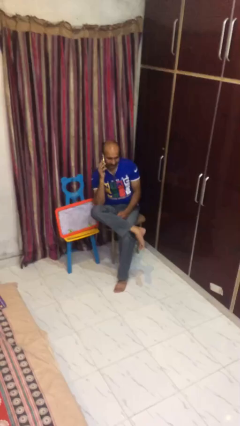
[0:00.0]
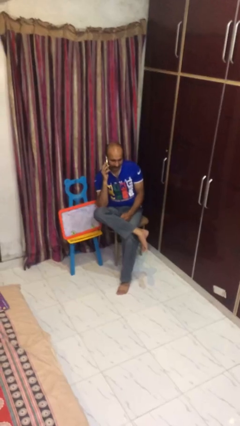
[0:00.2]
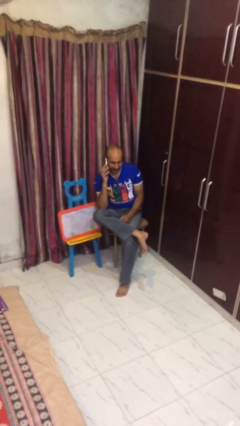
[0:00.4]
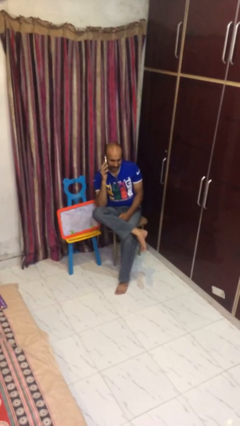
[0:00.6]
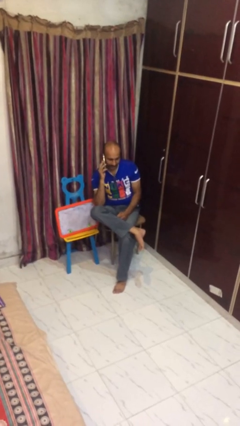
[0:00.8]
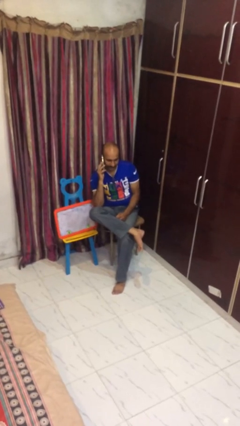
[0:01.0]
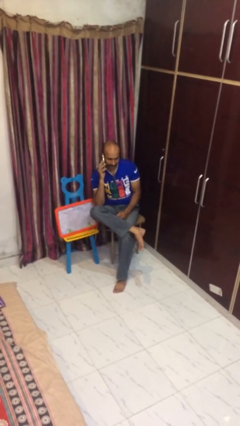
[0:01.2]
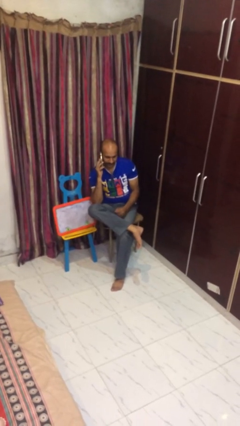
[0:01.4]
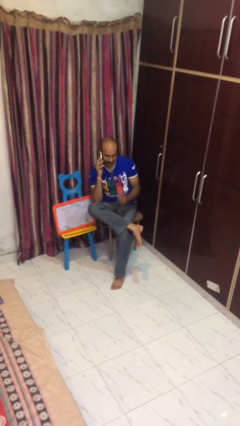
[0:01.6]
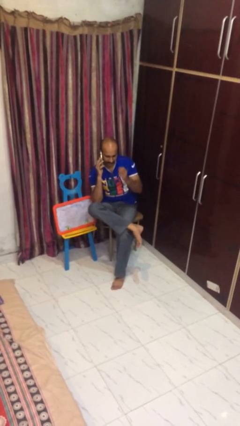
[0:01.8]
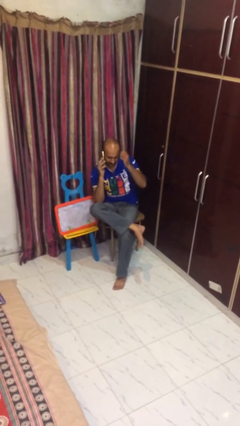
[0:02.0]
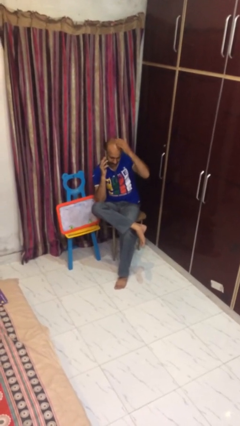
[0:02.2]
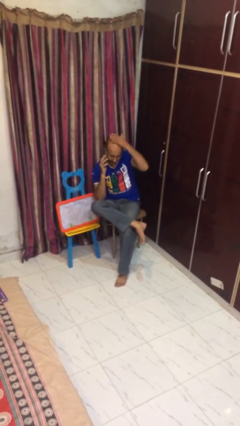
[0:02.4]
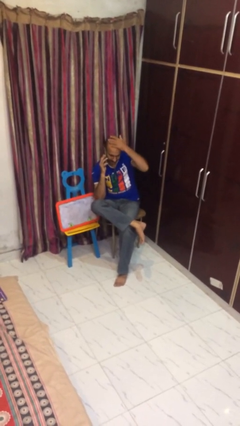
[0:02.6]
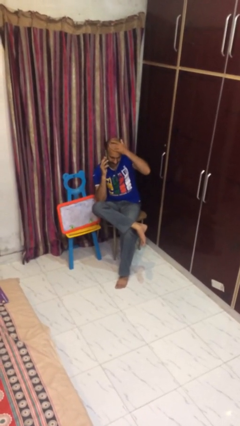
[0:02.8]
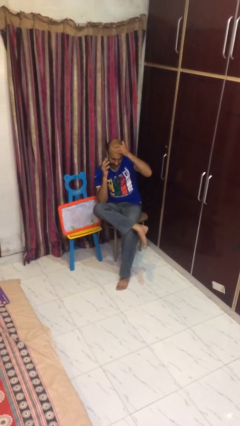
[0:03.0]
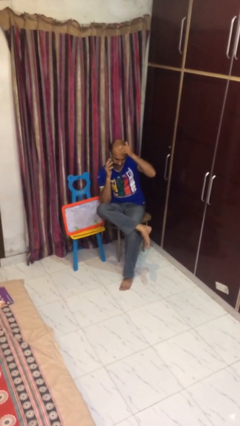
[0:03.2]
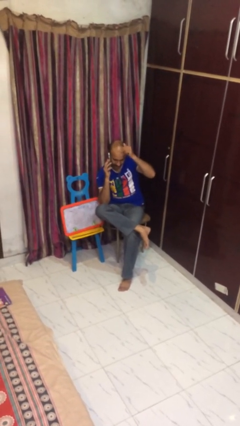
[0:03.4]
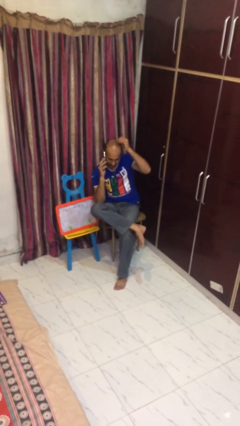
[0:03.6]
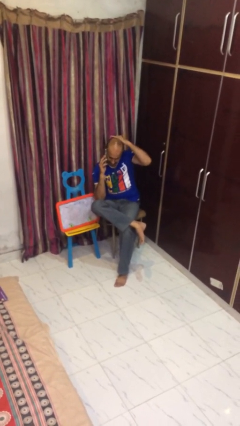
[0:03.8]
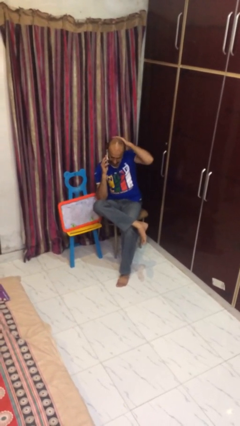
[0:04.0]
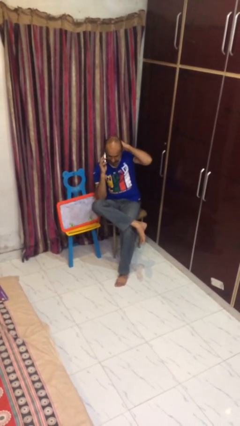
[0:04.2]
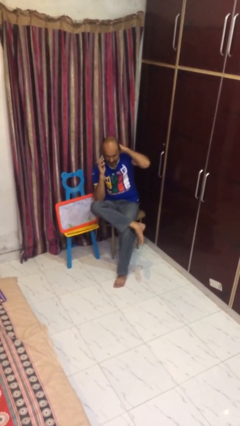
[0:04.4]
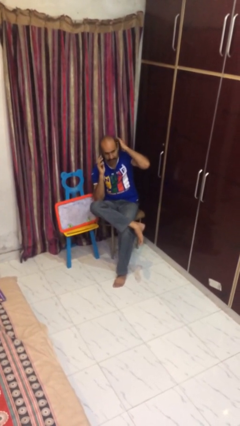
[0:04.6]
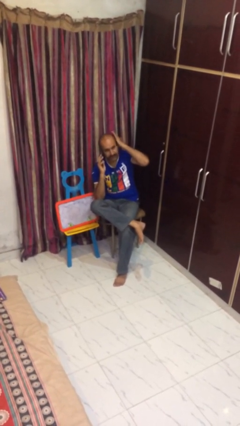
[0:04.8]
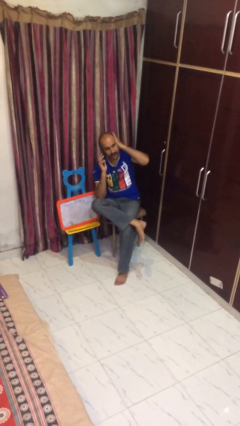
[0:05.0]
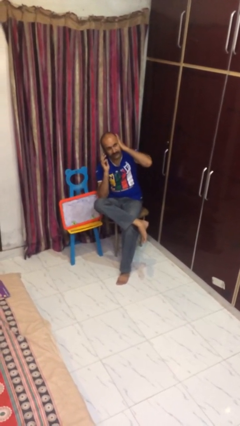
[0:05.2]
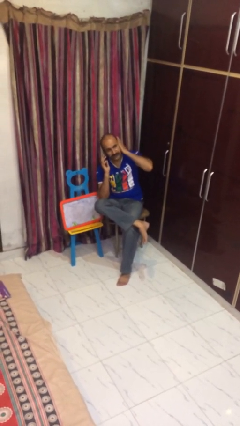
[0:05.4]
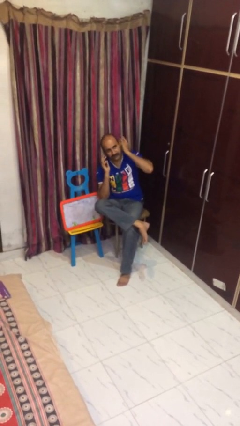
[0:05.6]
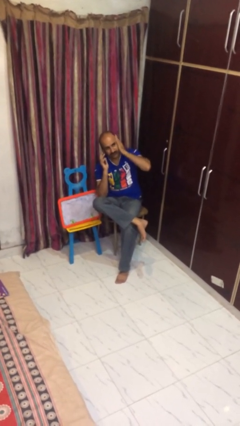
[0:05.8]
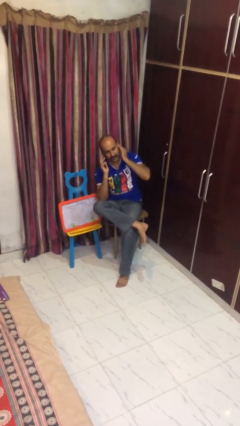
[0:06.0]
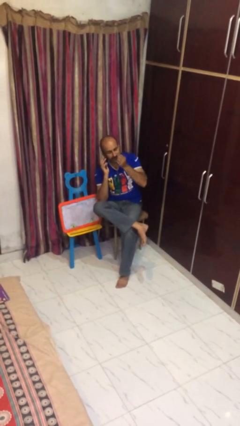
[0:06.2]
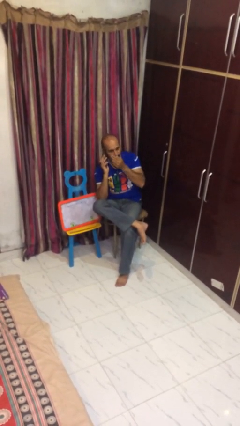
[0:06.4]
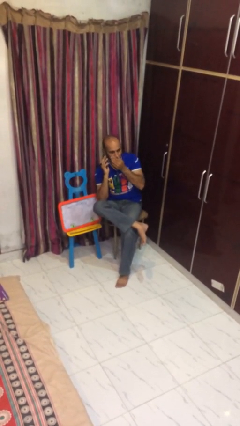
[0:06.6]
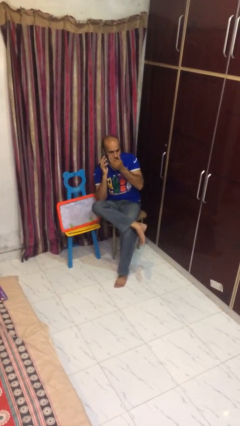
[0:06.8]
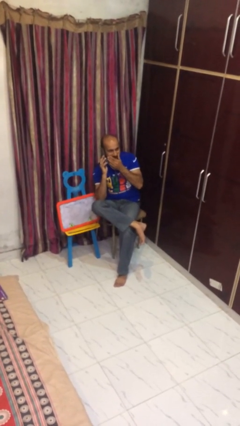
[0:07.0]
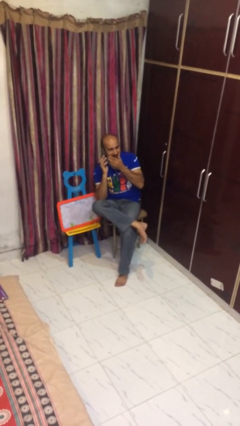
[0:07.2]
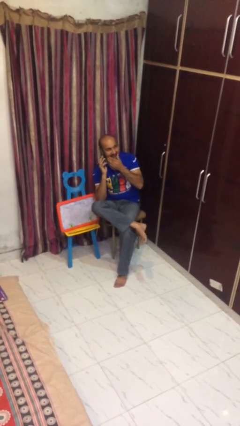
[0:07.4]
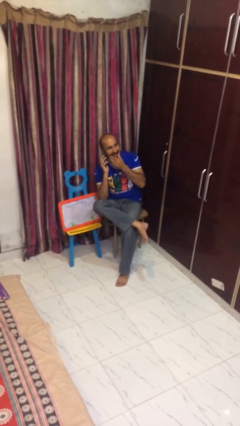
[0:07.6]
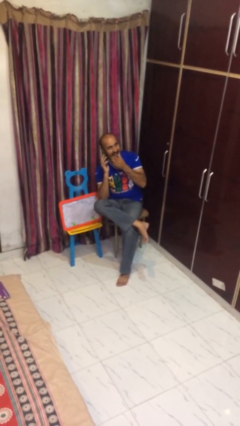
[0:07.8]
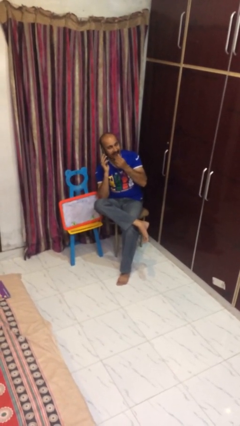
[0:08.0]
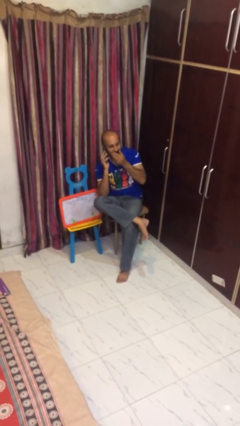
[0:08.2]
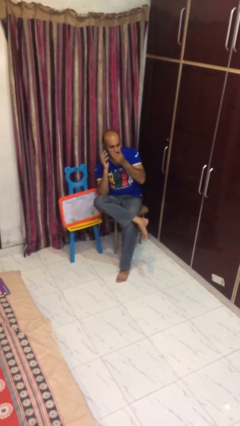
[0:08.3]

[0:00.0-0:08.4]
person talks on phone

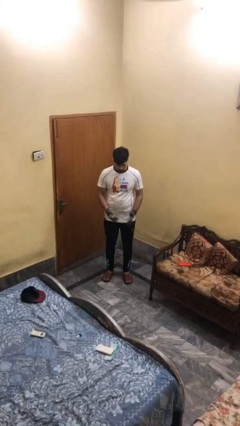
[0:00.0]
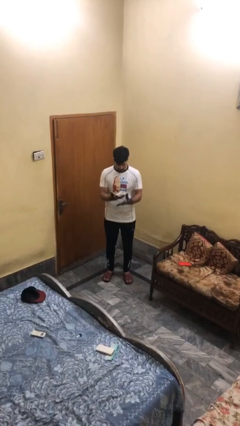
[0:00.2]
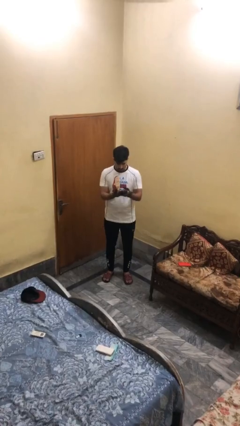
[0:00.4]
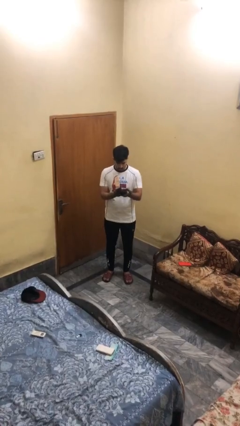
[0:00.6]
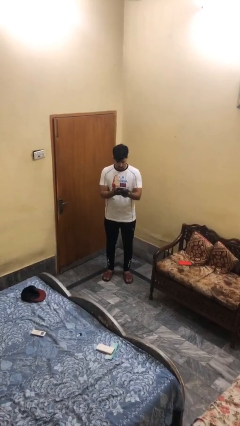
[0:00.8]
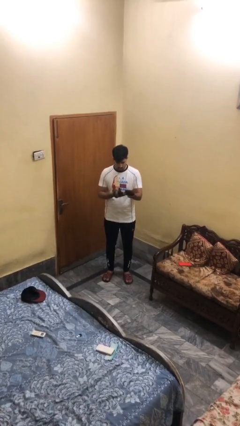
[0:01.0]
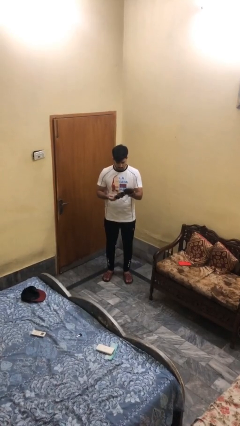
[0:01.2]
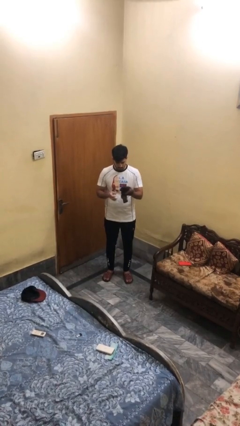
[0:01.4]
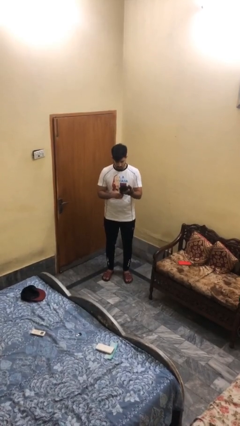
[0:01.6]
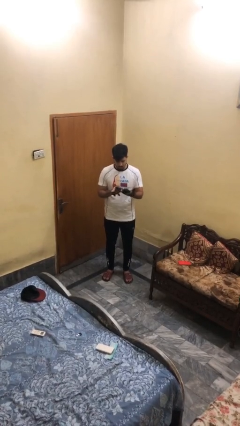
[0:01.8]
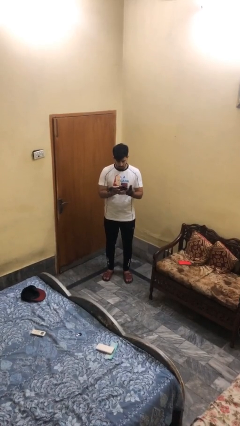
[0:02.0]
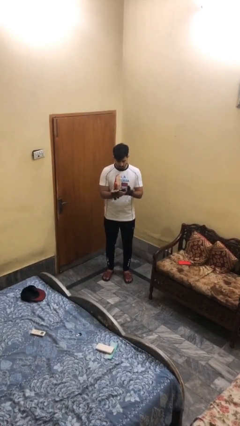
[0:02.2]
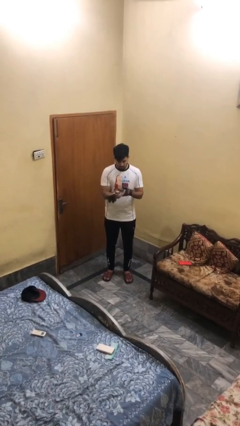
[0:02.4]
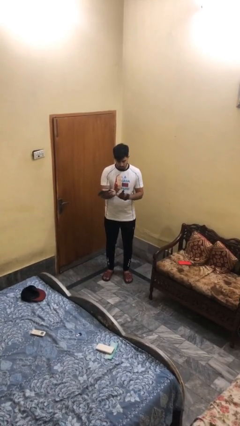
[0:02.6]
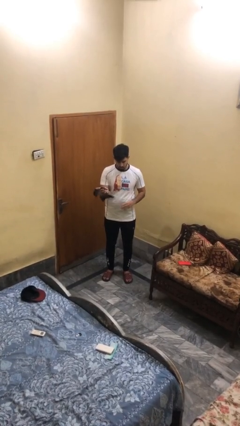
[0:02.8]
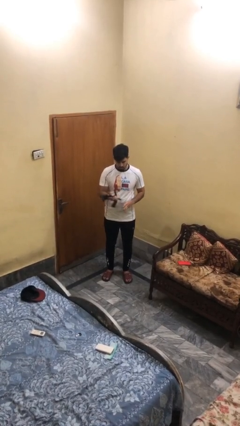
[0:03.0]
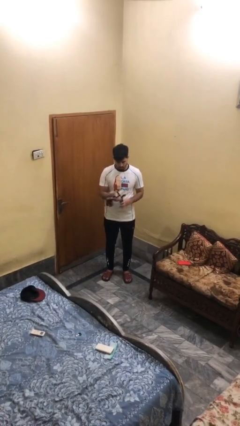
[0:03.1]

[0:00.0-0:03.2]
person takes off gloves

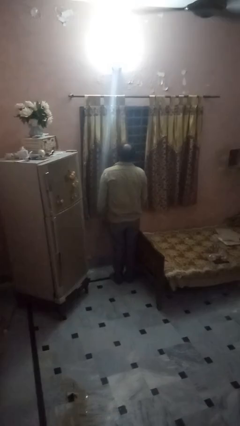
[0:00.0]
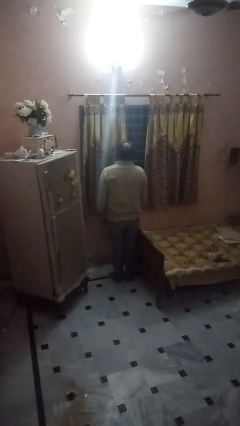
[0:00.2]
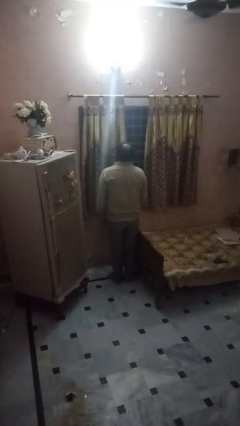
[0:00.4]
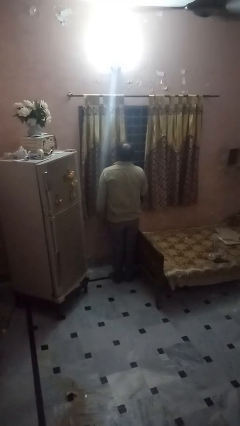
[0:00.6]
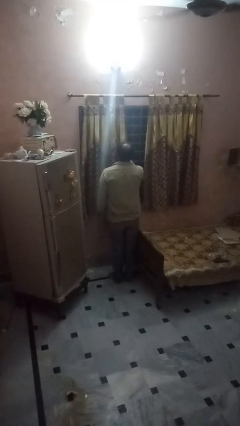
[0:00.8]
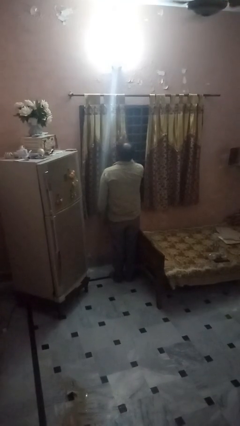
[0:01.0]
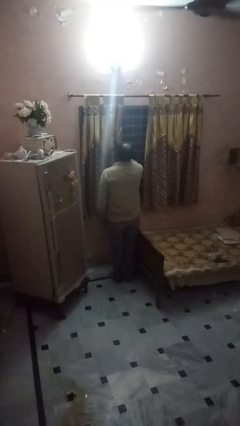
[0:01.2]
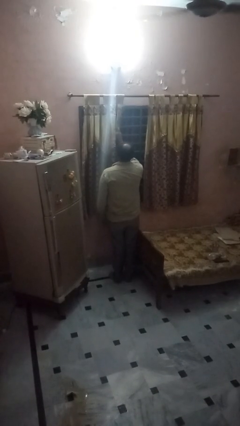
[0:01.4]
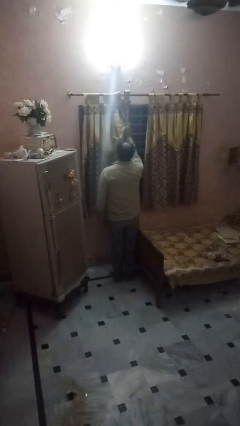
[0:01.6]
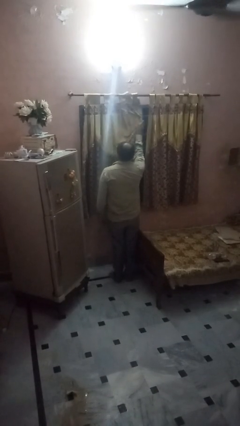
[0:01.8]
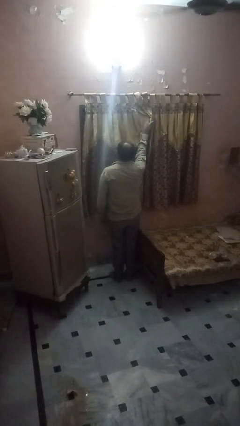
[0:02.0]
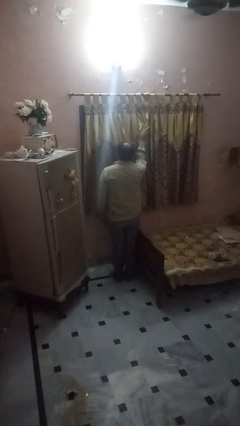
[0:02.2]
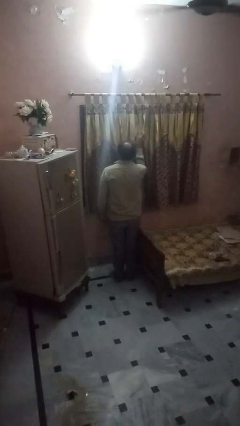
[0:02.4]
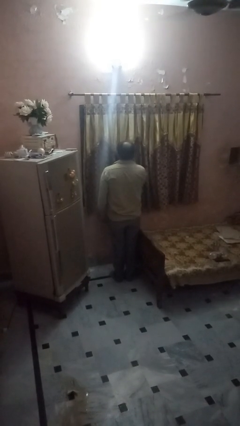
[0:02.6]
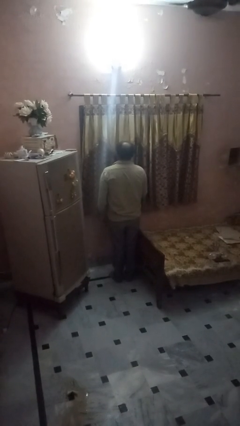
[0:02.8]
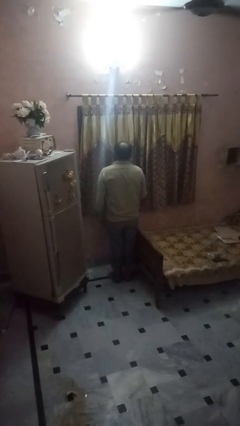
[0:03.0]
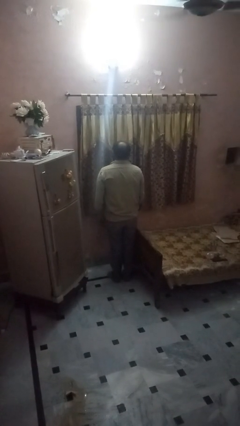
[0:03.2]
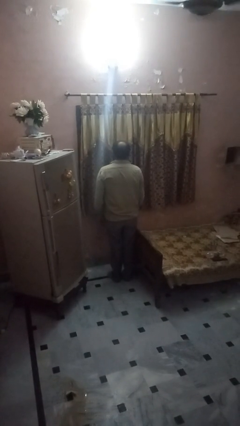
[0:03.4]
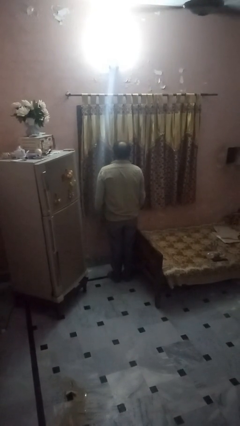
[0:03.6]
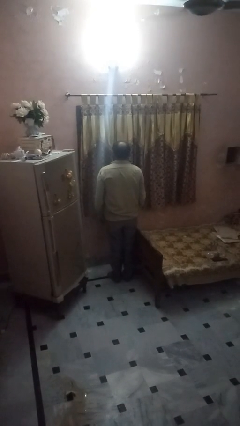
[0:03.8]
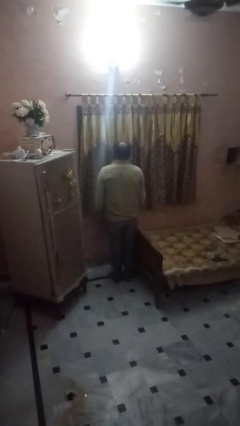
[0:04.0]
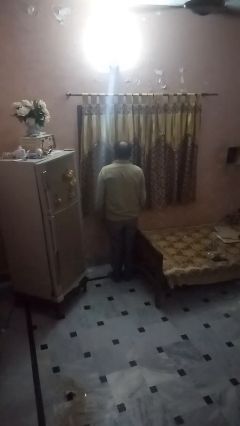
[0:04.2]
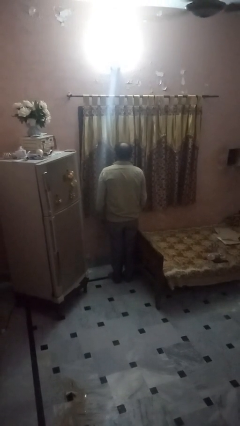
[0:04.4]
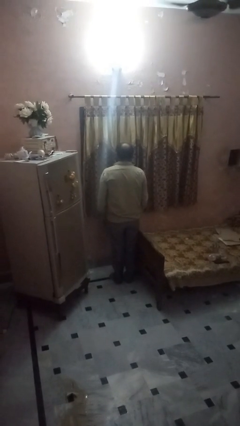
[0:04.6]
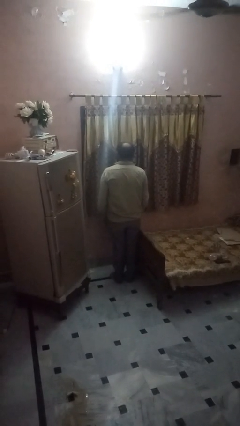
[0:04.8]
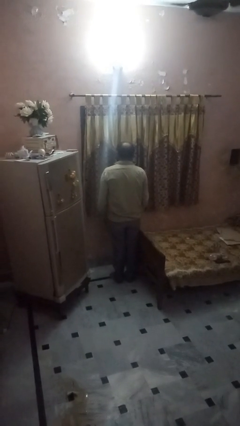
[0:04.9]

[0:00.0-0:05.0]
person closes curtains

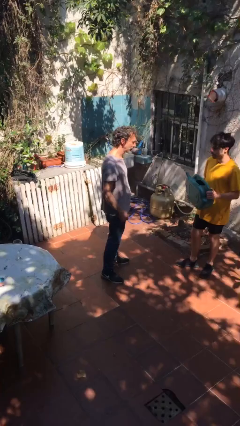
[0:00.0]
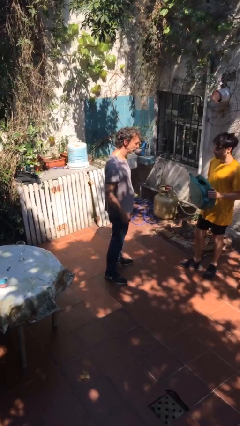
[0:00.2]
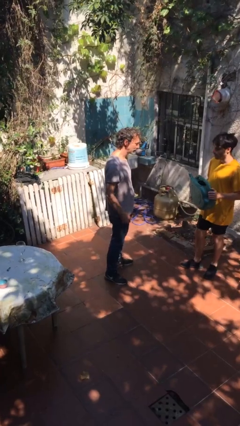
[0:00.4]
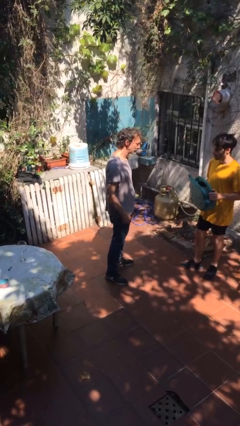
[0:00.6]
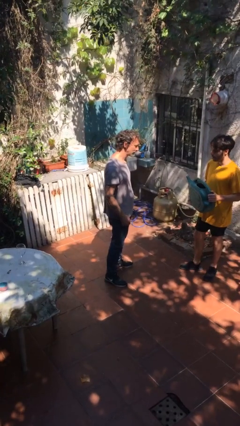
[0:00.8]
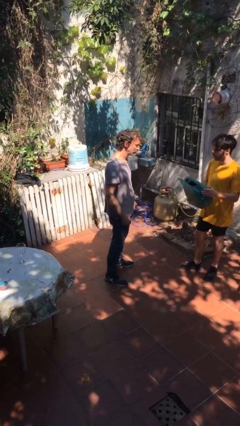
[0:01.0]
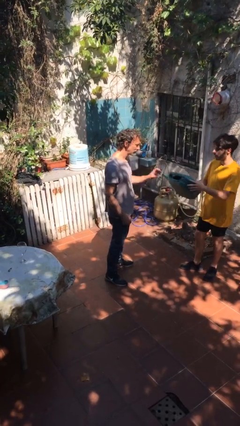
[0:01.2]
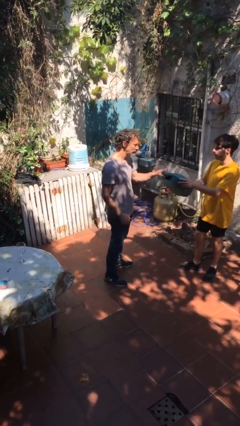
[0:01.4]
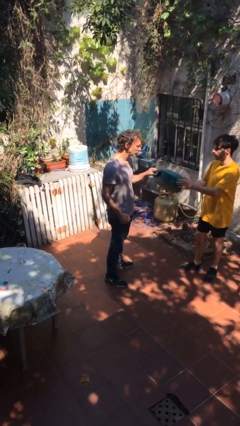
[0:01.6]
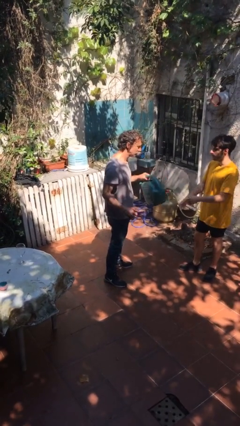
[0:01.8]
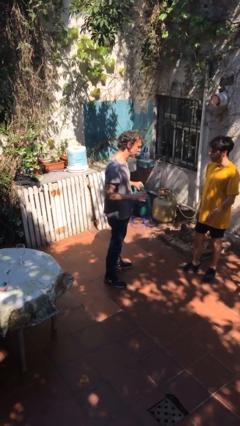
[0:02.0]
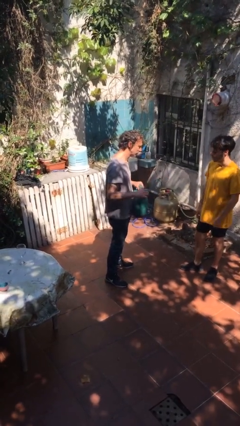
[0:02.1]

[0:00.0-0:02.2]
person transfers object to person
